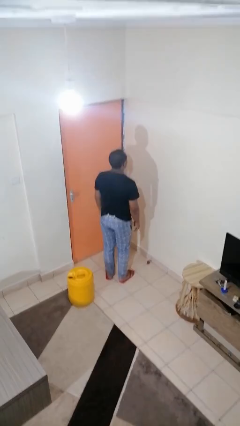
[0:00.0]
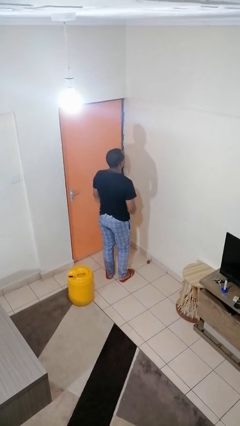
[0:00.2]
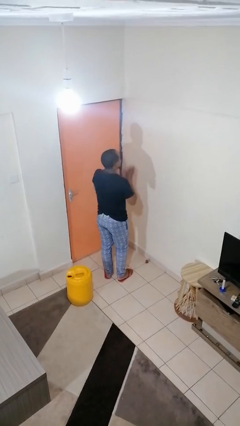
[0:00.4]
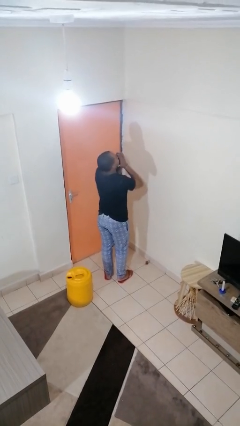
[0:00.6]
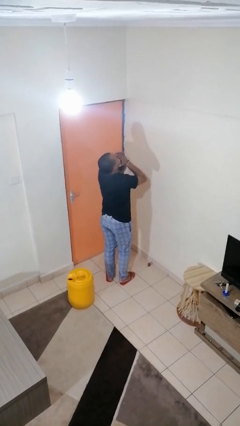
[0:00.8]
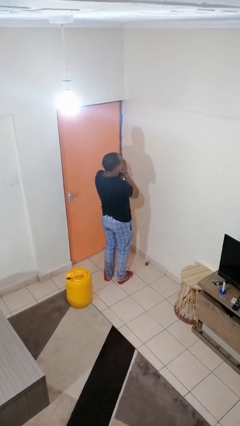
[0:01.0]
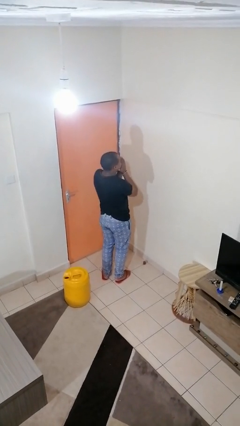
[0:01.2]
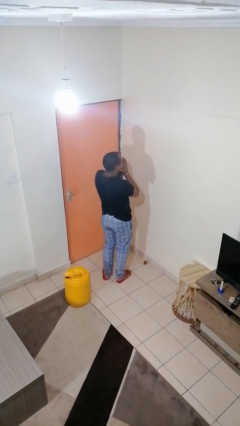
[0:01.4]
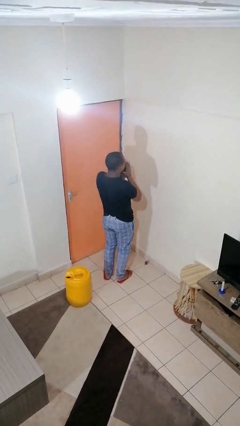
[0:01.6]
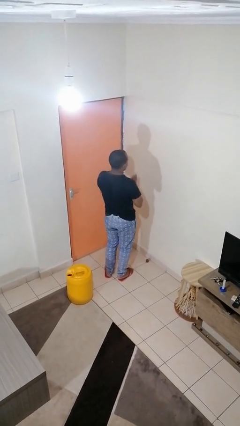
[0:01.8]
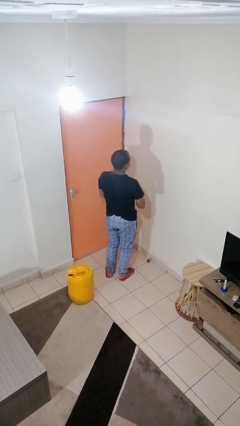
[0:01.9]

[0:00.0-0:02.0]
person sneezes into hand

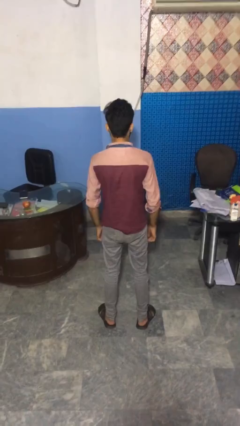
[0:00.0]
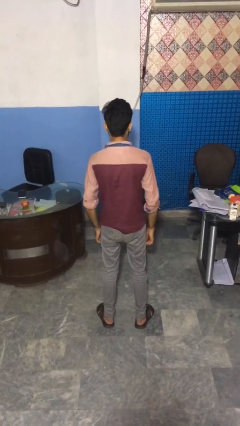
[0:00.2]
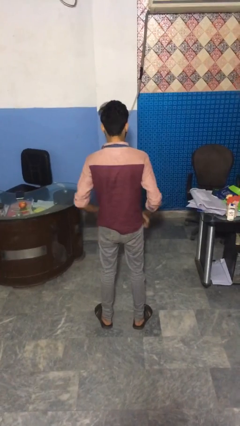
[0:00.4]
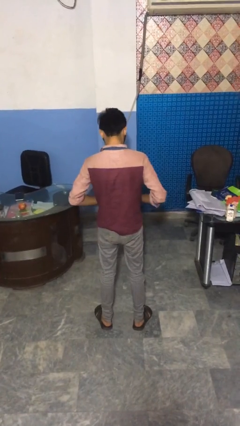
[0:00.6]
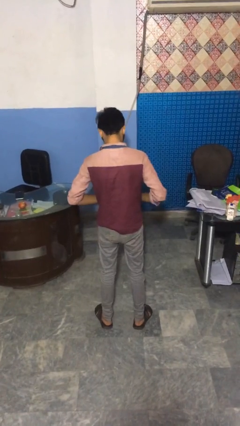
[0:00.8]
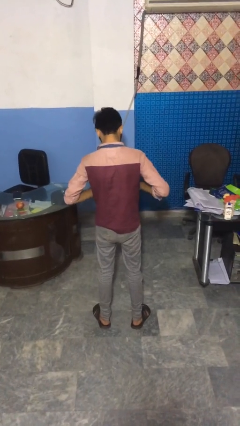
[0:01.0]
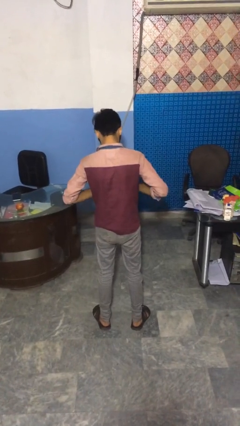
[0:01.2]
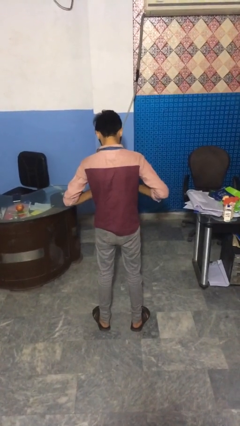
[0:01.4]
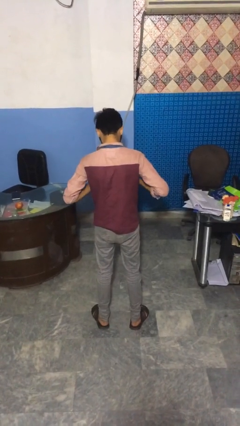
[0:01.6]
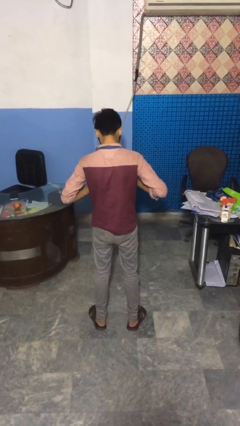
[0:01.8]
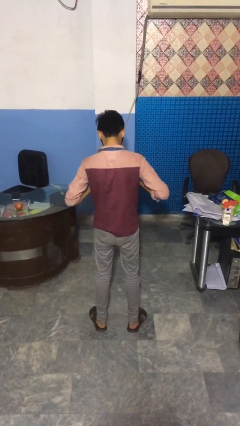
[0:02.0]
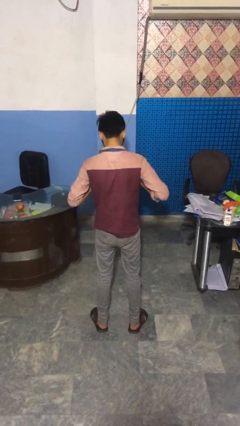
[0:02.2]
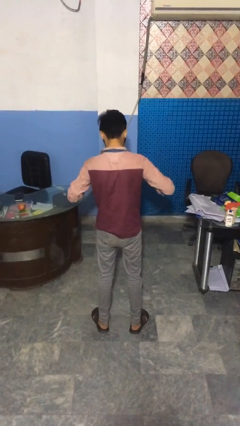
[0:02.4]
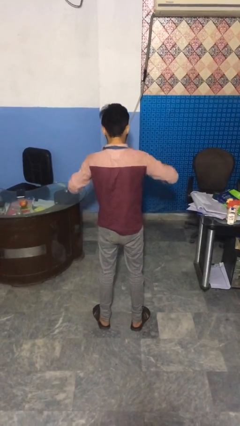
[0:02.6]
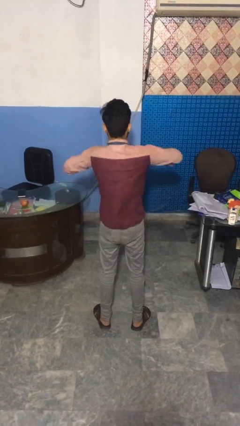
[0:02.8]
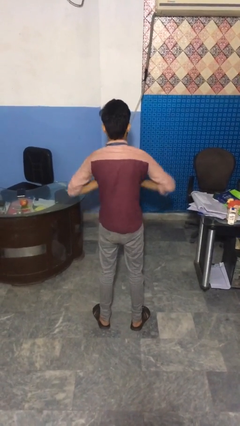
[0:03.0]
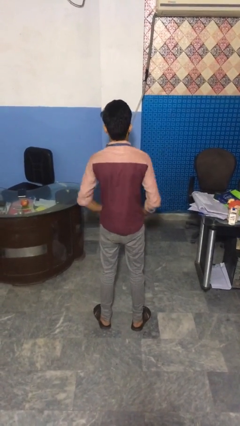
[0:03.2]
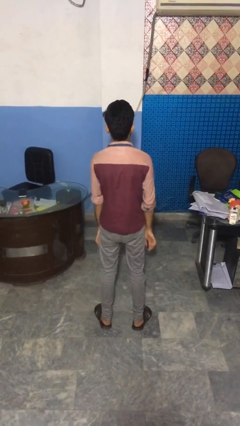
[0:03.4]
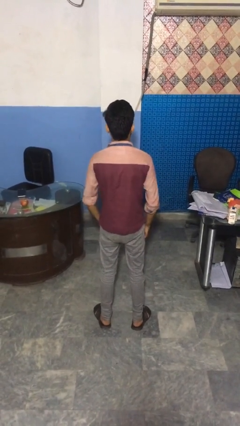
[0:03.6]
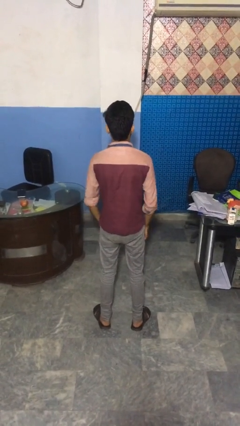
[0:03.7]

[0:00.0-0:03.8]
person buttons shirt

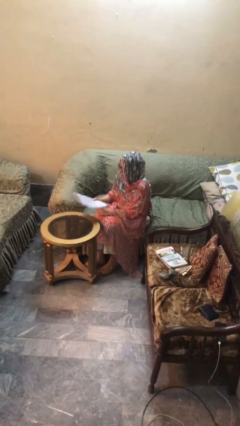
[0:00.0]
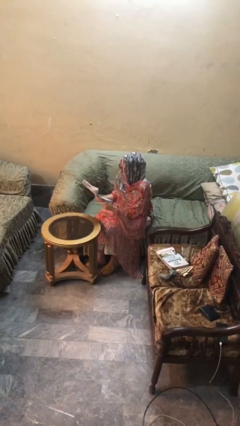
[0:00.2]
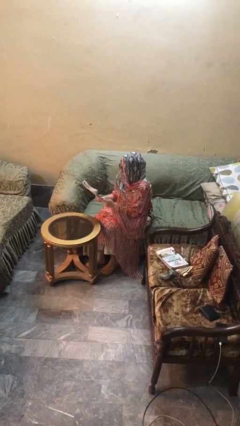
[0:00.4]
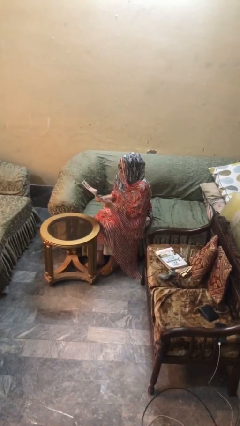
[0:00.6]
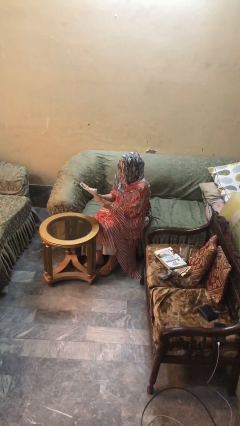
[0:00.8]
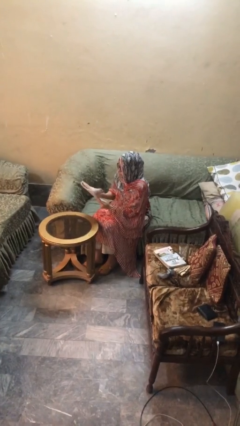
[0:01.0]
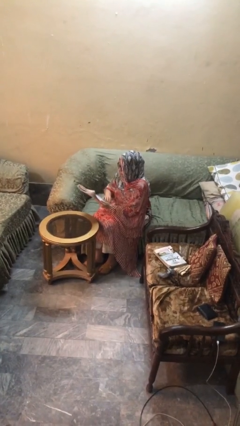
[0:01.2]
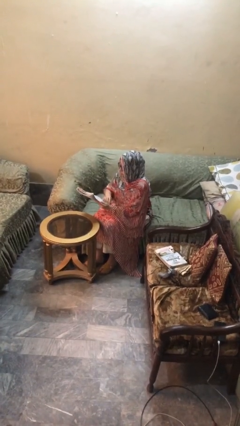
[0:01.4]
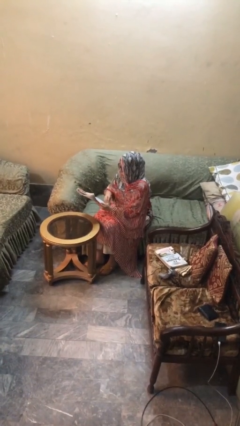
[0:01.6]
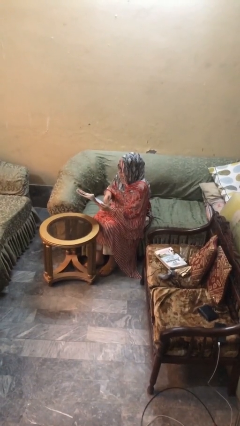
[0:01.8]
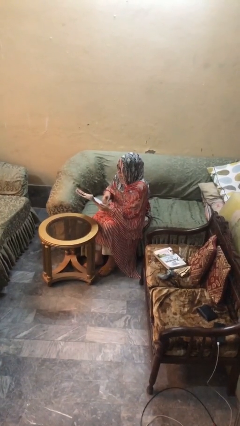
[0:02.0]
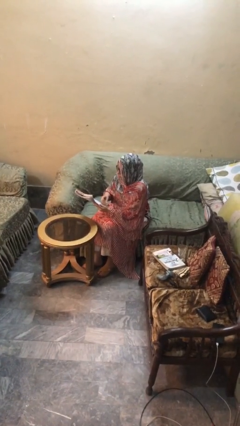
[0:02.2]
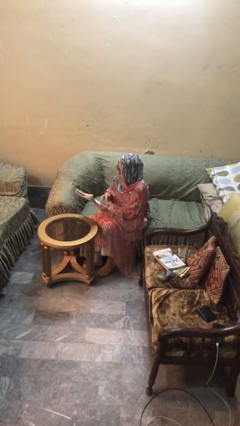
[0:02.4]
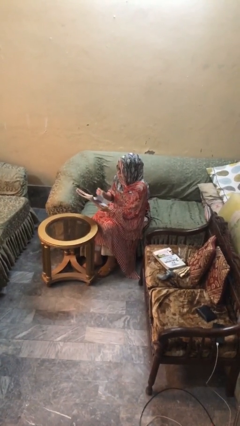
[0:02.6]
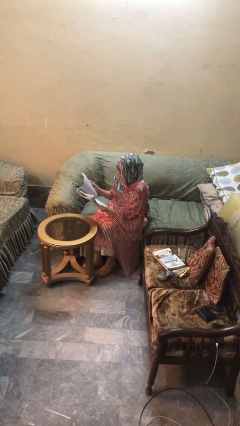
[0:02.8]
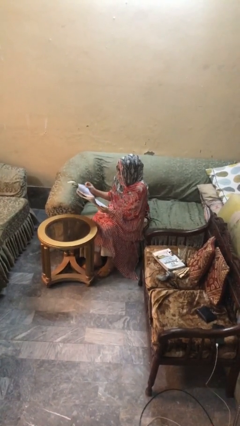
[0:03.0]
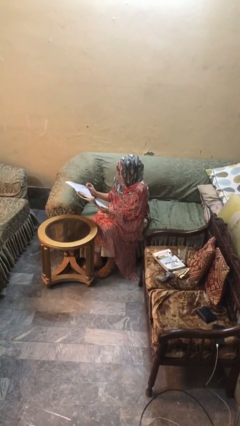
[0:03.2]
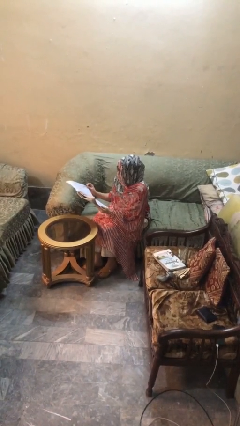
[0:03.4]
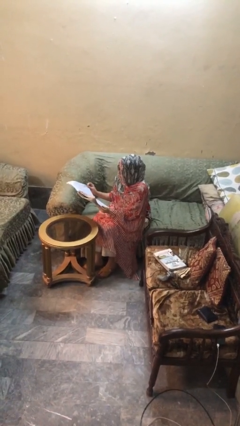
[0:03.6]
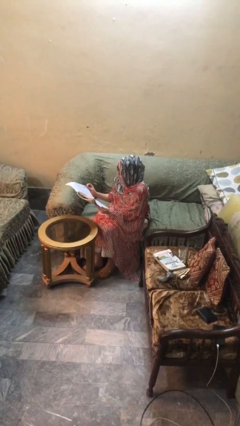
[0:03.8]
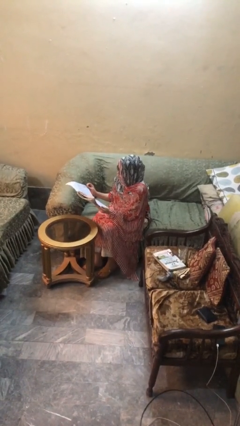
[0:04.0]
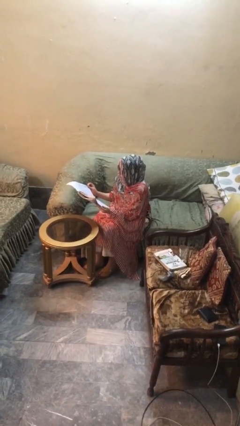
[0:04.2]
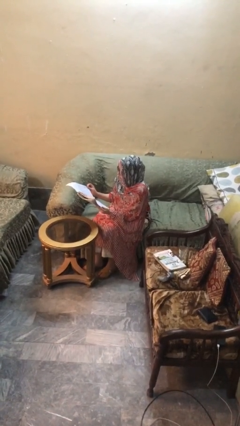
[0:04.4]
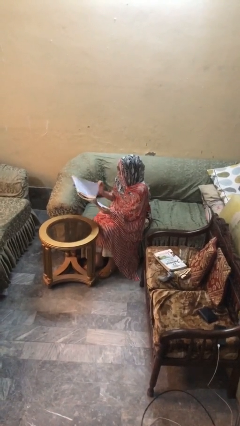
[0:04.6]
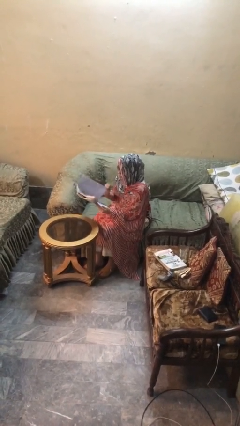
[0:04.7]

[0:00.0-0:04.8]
person reads magazine

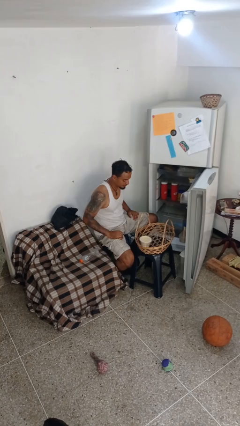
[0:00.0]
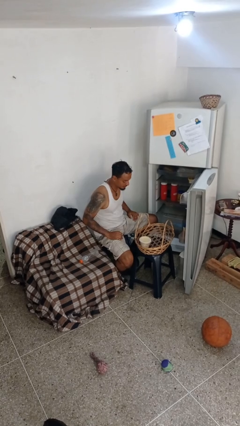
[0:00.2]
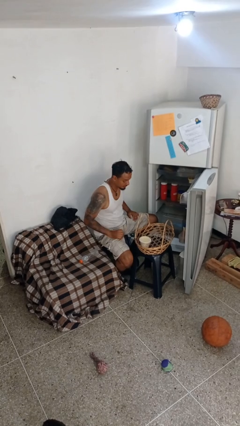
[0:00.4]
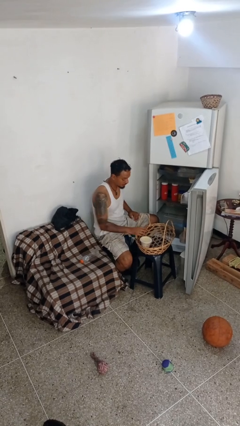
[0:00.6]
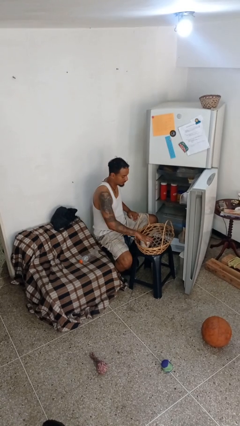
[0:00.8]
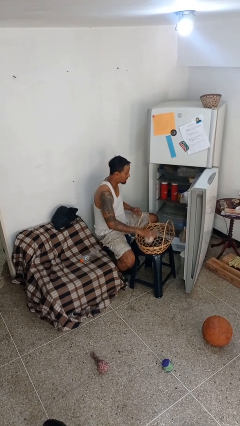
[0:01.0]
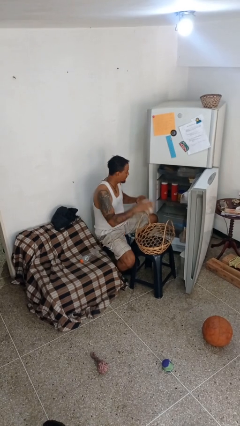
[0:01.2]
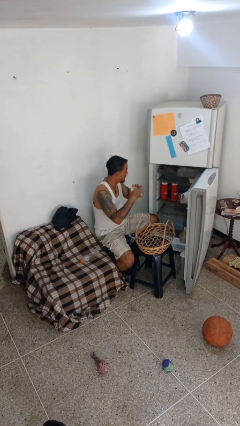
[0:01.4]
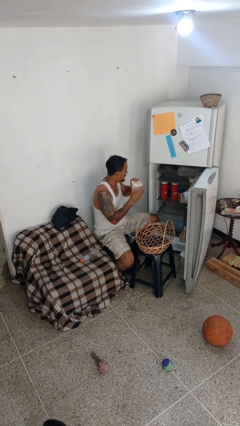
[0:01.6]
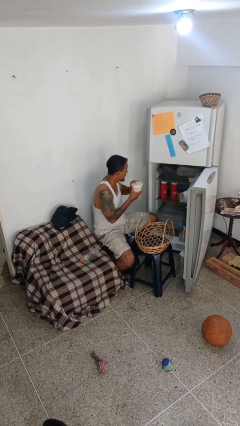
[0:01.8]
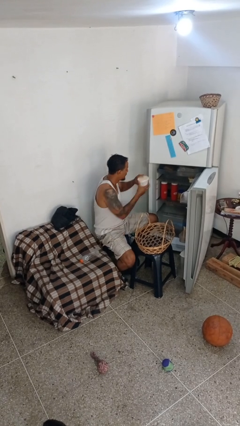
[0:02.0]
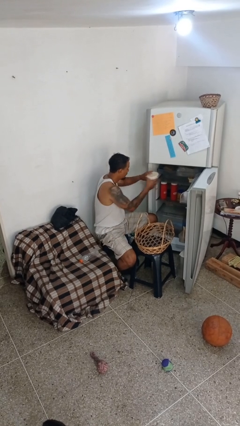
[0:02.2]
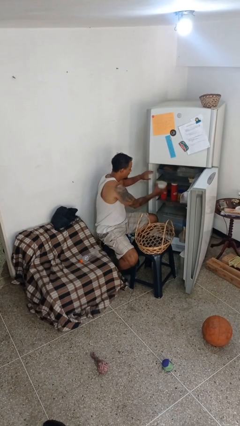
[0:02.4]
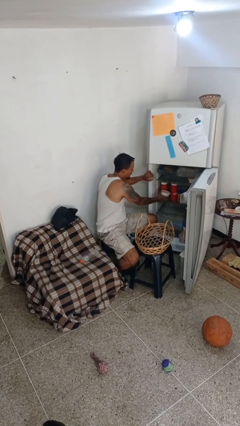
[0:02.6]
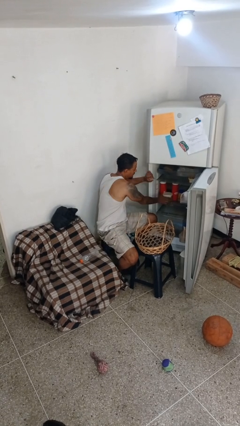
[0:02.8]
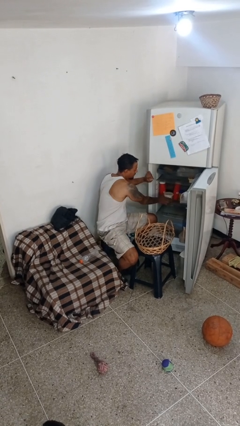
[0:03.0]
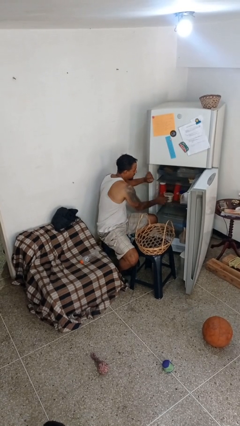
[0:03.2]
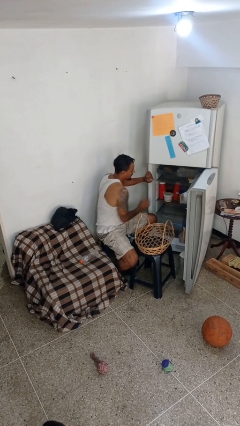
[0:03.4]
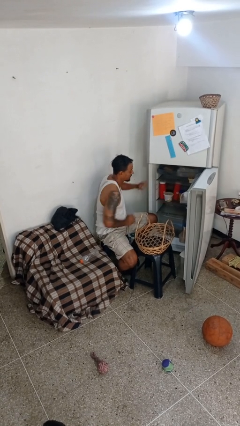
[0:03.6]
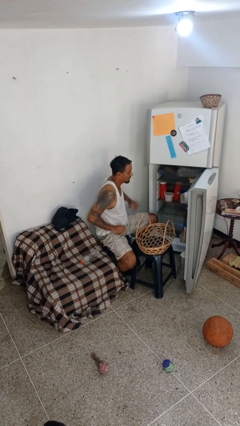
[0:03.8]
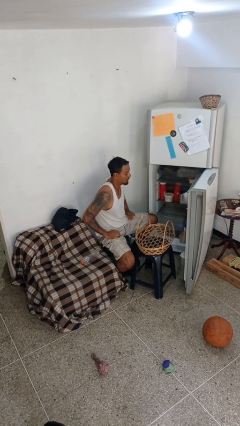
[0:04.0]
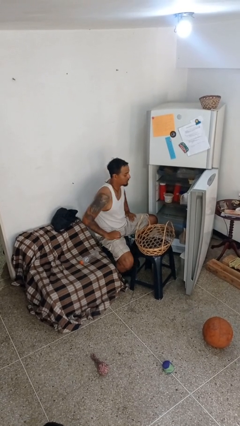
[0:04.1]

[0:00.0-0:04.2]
person loads groceries into refrigerator

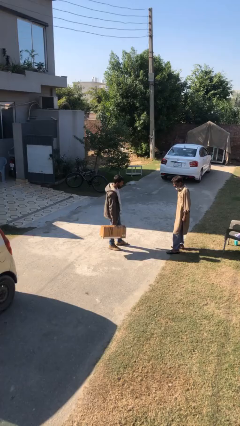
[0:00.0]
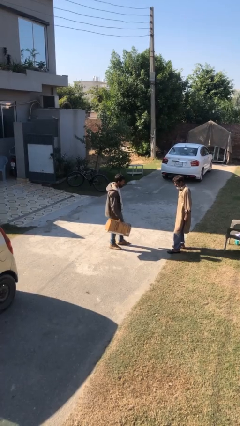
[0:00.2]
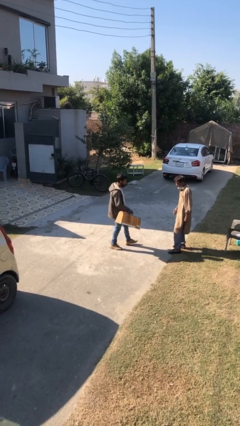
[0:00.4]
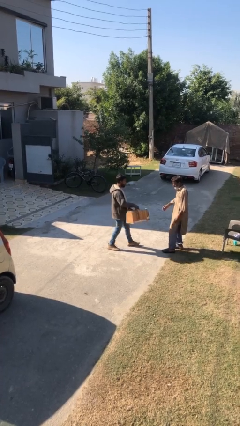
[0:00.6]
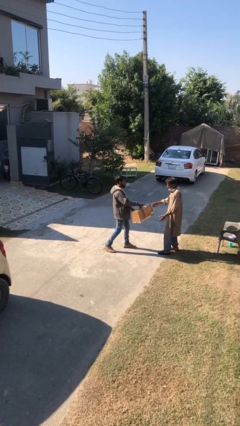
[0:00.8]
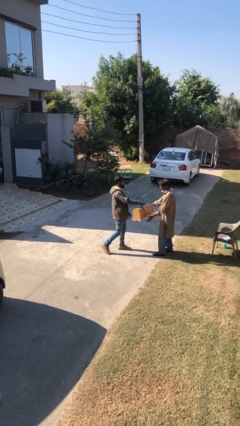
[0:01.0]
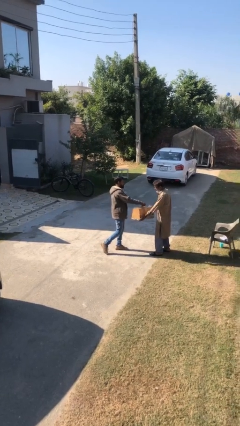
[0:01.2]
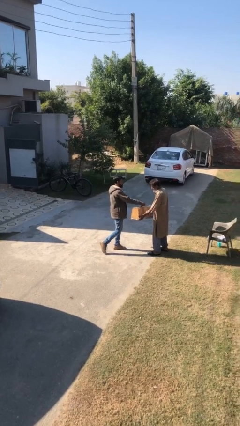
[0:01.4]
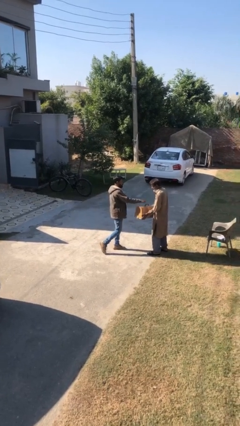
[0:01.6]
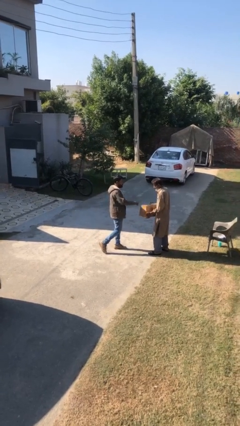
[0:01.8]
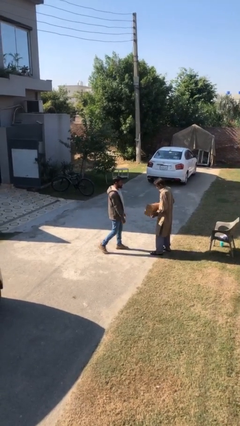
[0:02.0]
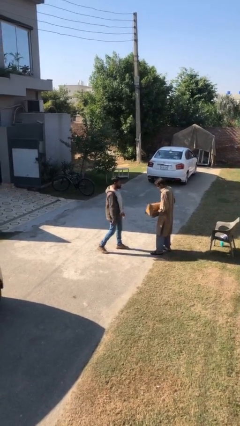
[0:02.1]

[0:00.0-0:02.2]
person transfers object to person

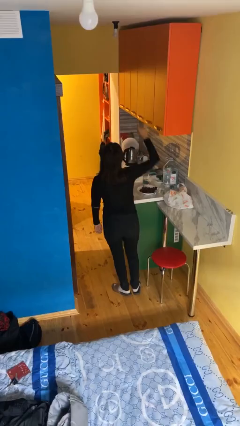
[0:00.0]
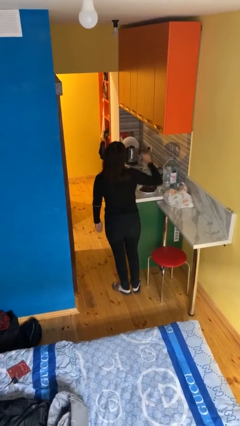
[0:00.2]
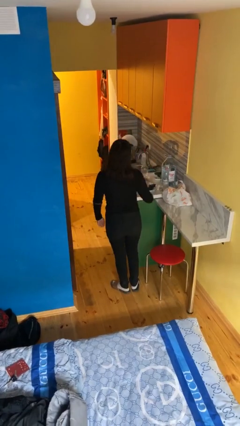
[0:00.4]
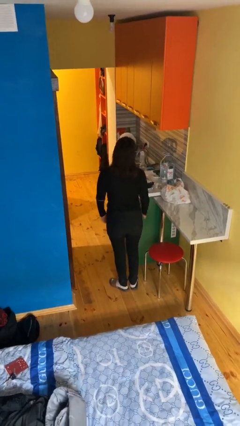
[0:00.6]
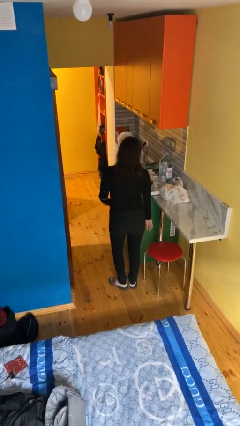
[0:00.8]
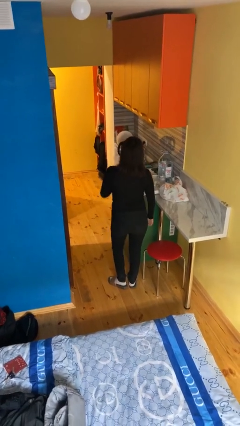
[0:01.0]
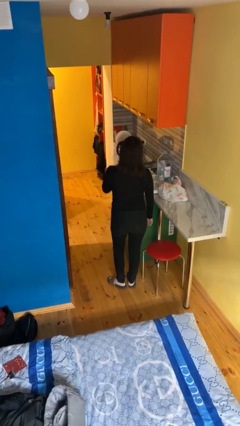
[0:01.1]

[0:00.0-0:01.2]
person gestures lower hand
